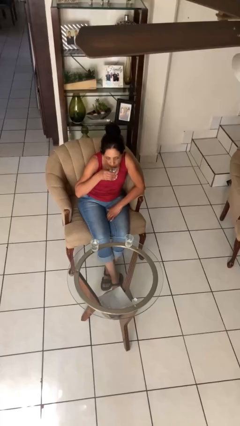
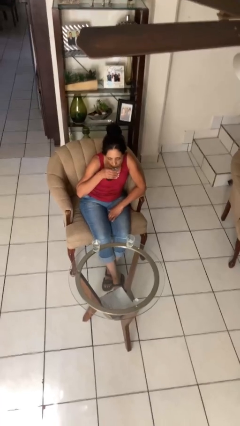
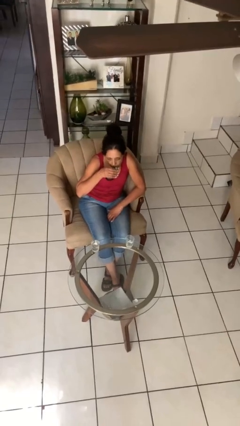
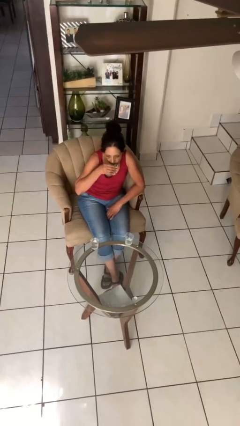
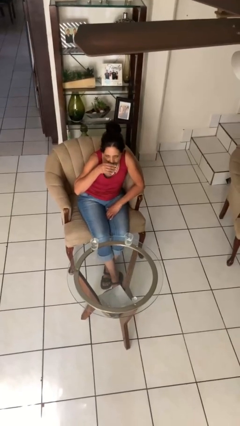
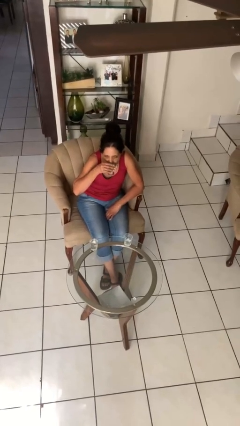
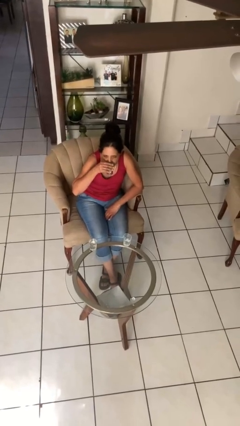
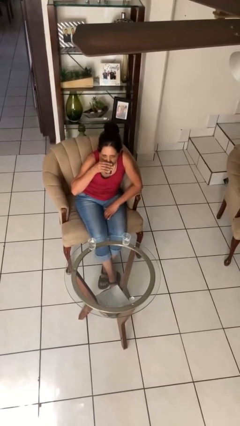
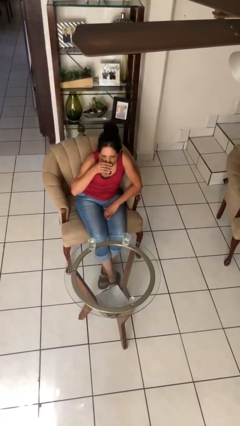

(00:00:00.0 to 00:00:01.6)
person drinks from shotglass

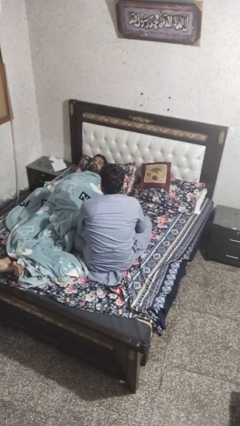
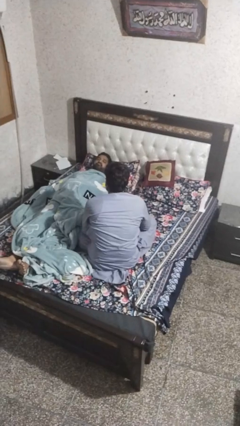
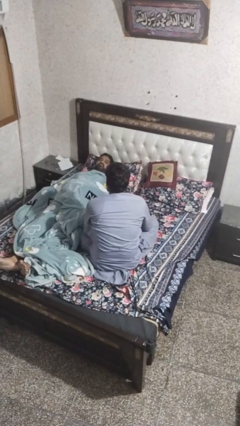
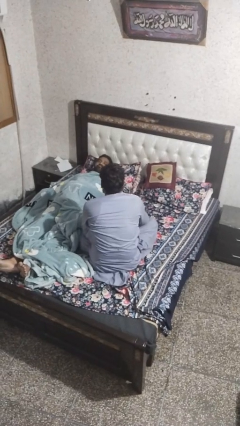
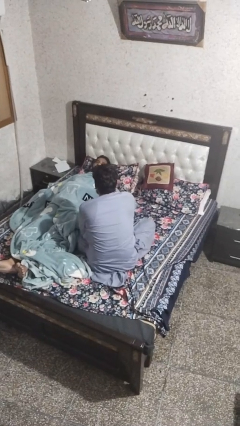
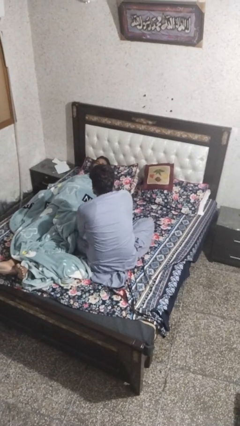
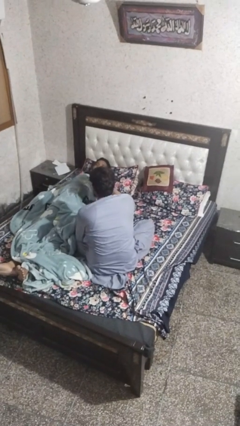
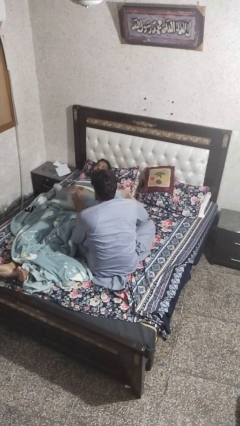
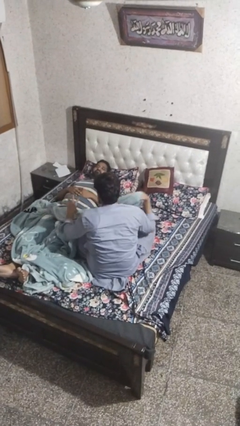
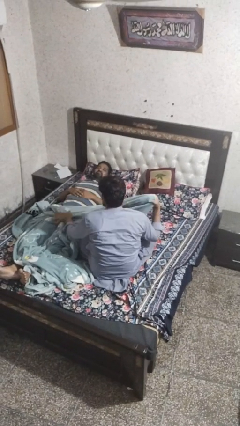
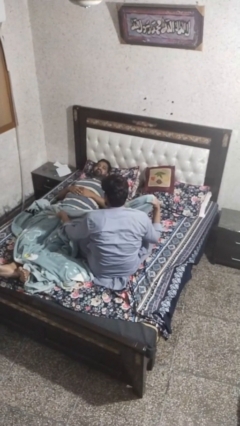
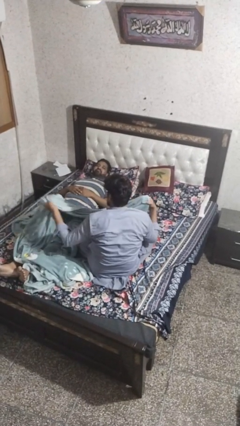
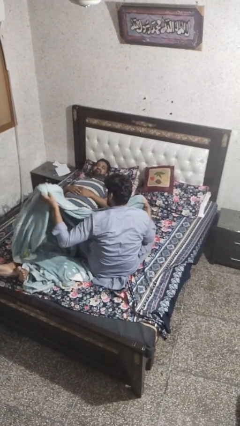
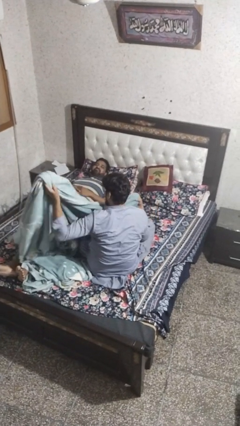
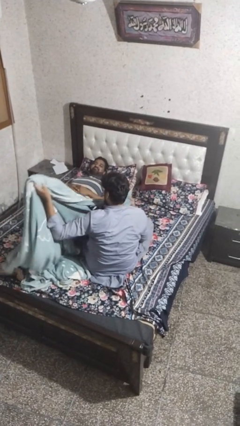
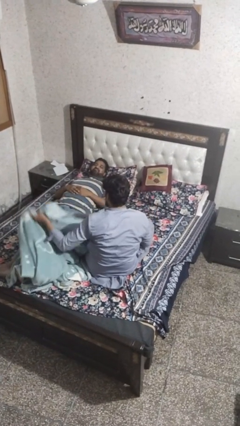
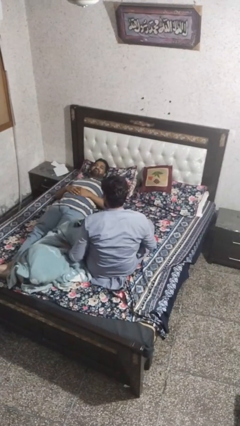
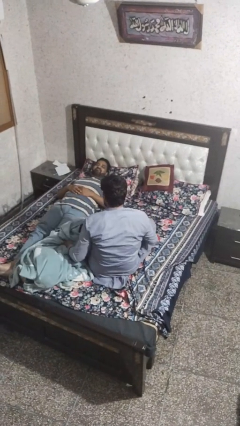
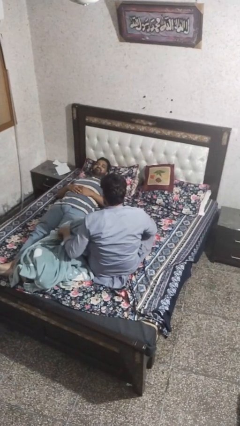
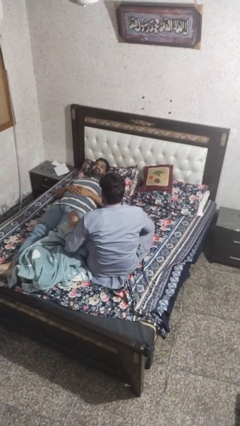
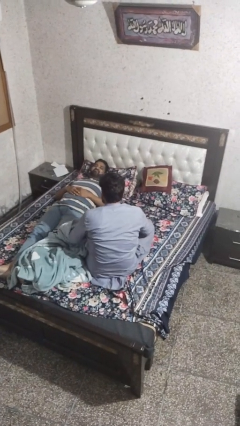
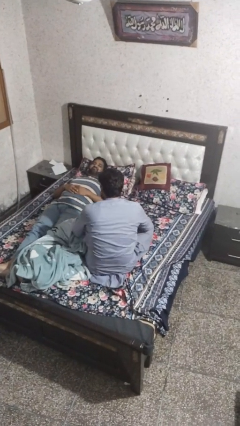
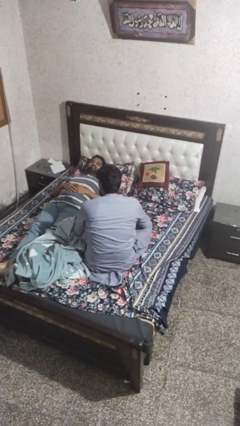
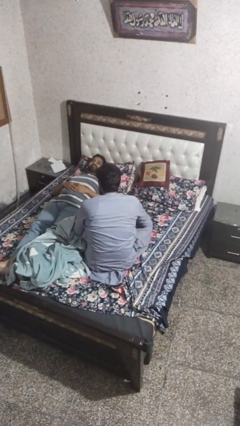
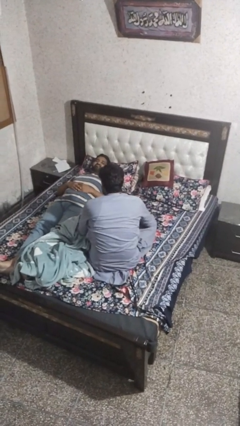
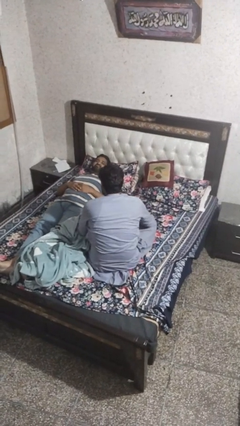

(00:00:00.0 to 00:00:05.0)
person uncovers friend with blanket

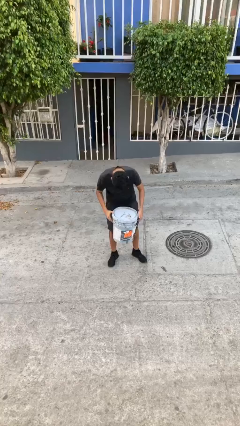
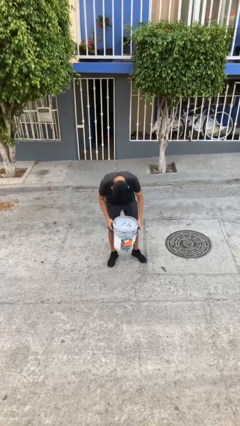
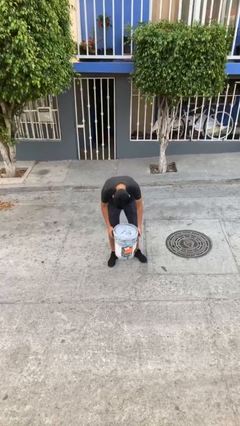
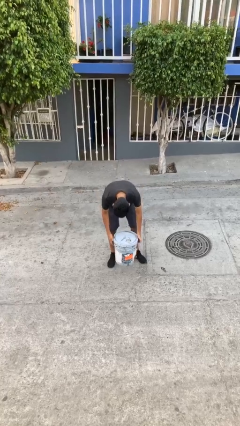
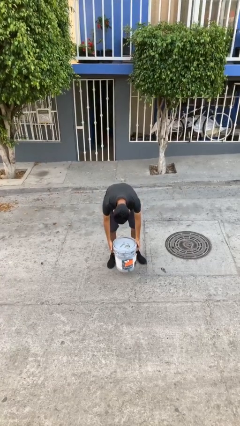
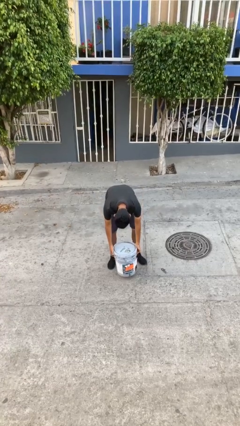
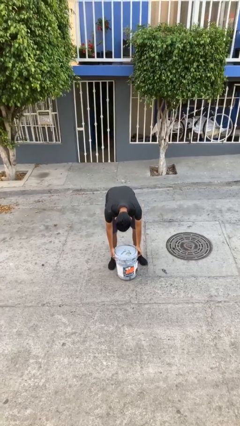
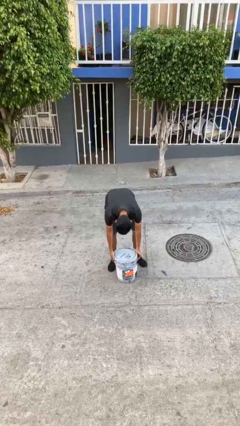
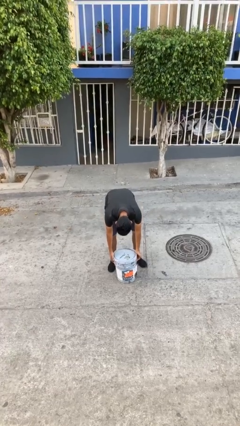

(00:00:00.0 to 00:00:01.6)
person puts down object on floor

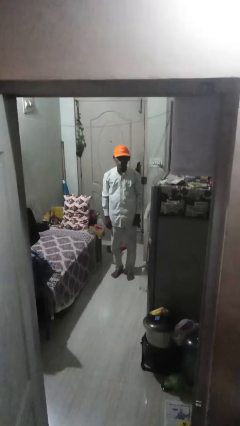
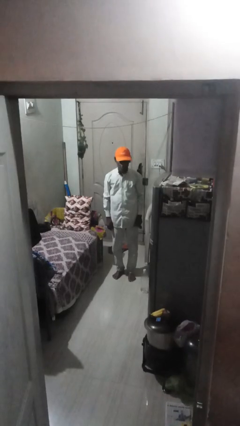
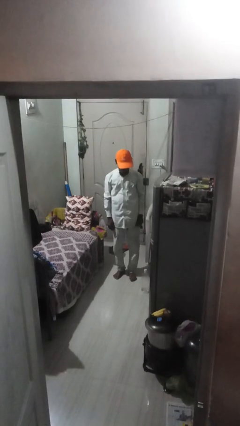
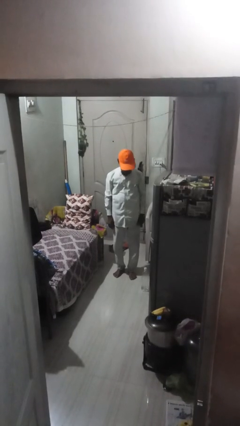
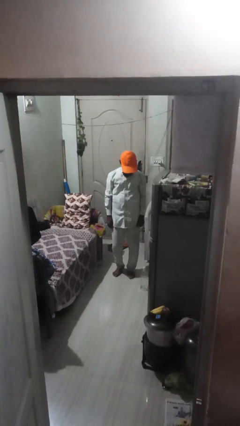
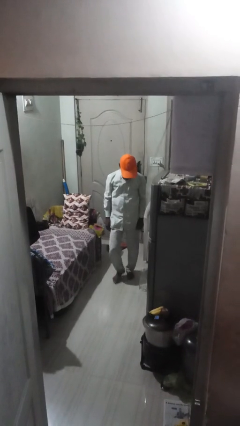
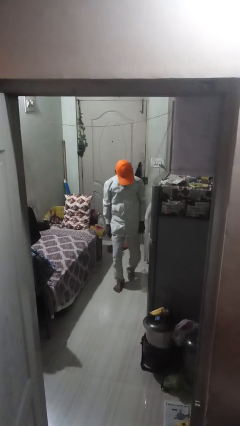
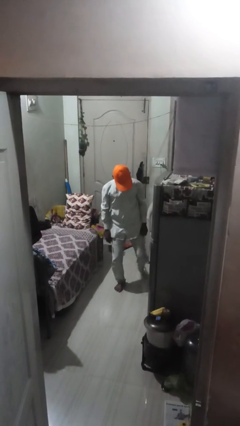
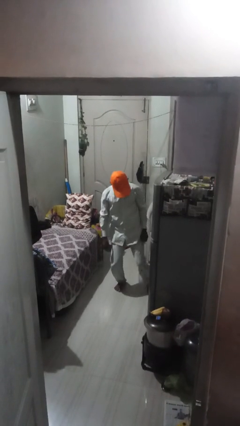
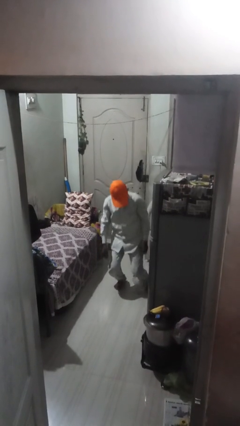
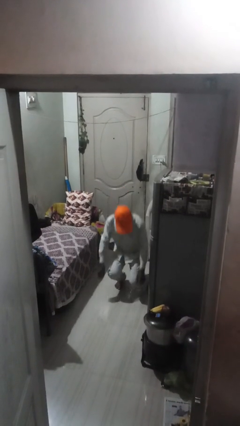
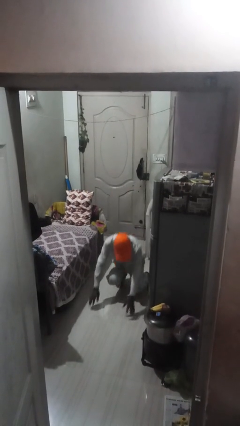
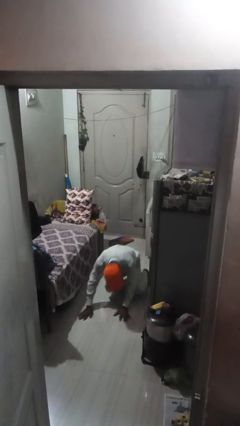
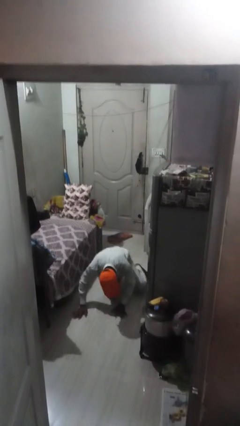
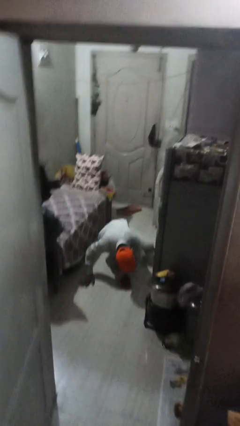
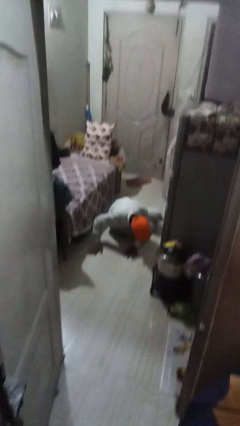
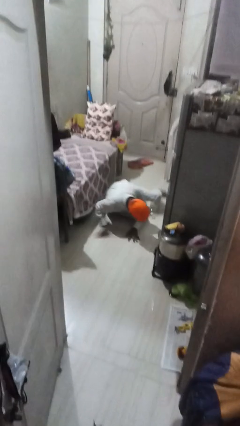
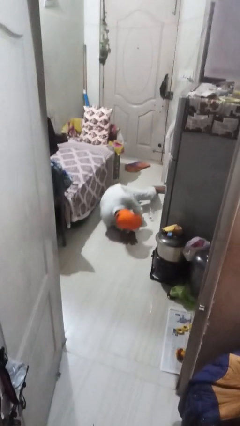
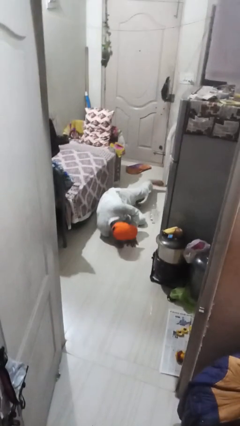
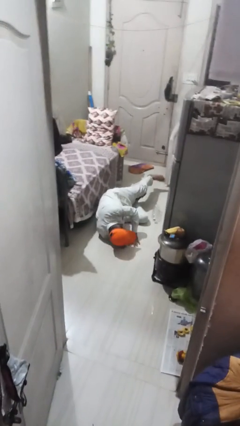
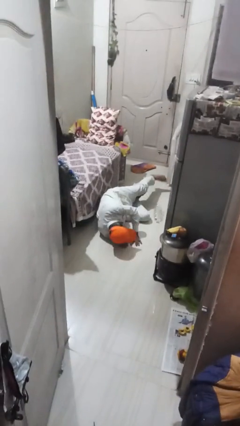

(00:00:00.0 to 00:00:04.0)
person trips on object on floor

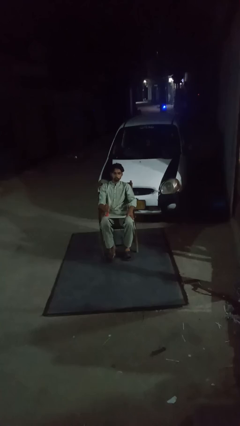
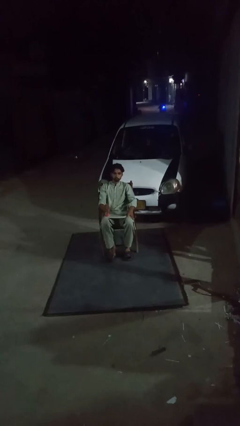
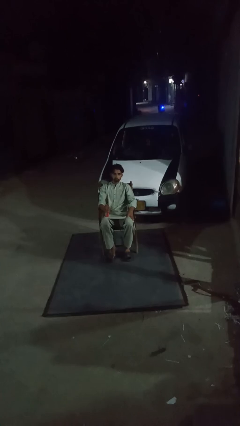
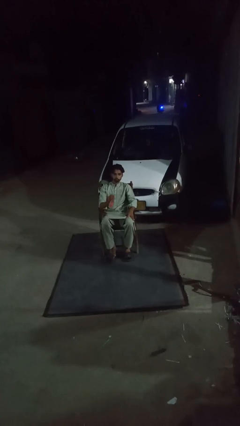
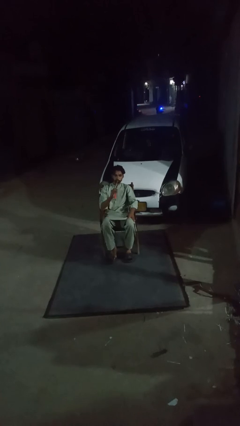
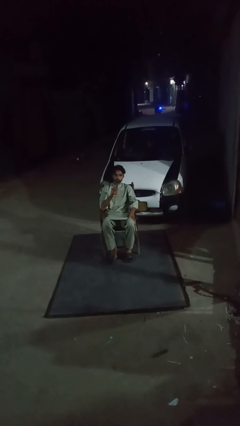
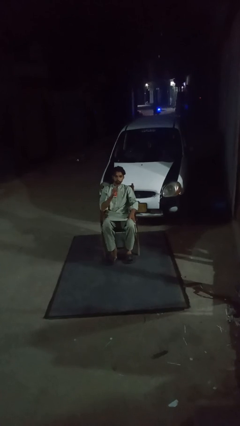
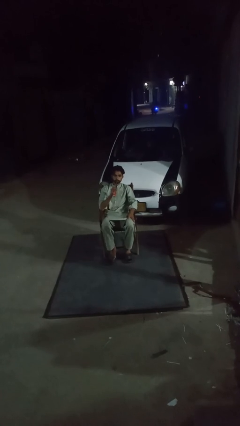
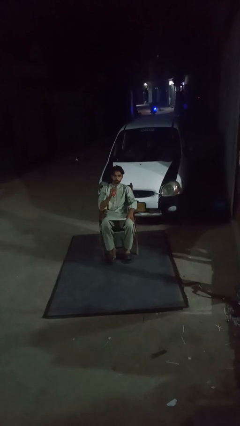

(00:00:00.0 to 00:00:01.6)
person drinks from straw

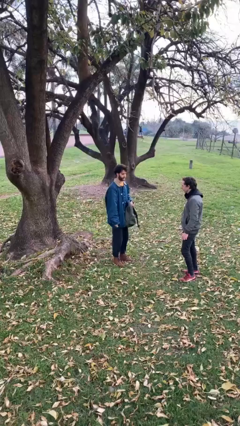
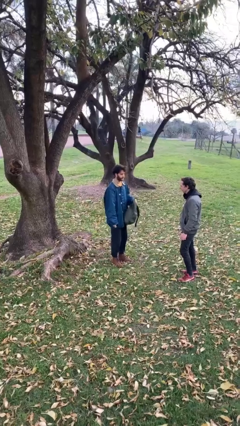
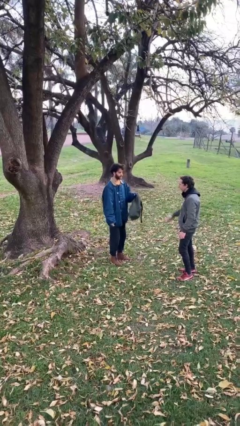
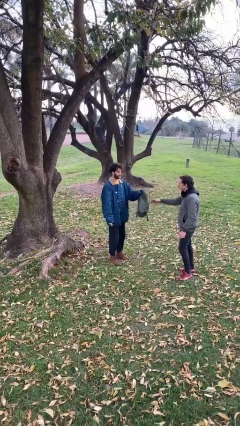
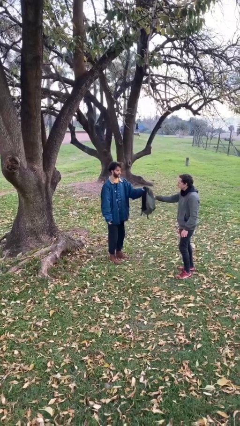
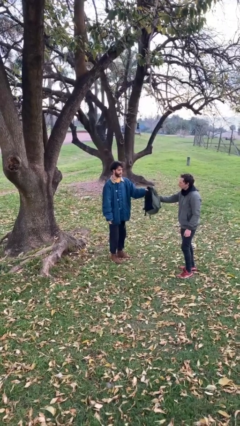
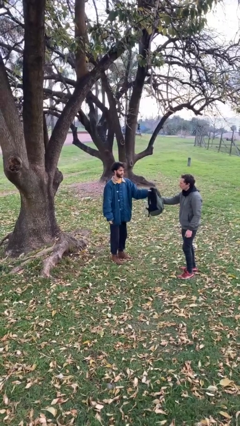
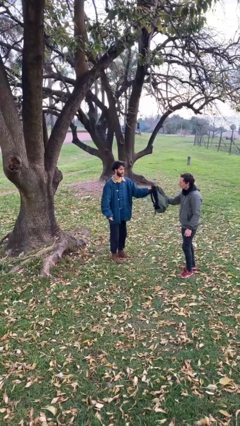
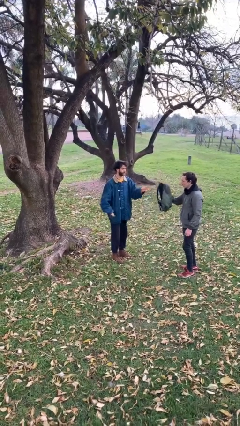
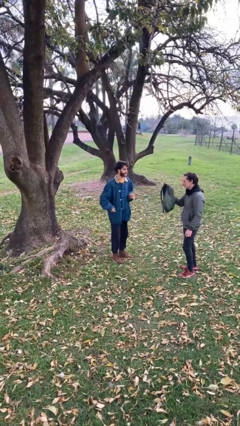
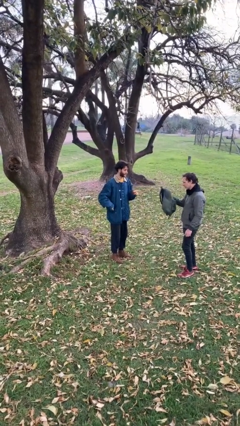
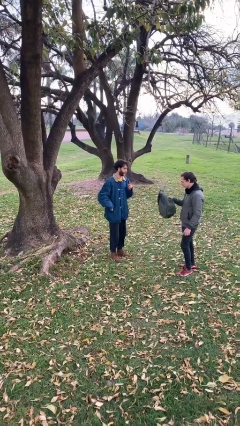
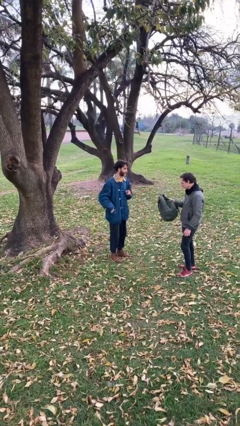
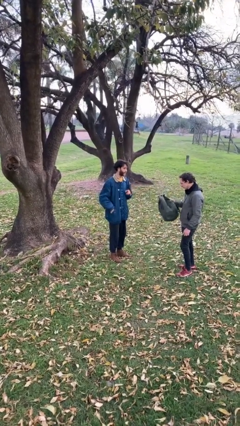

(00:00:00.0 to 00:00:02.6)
person transfers object to person

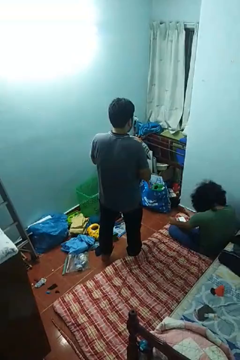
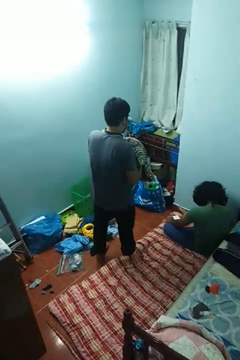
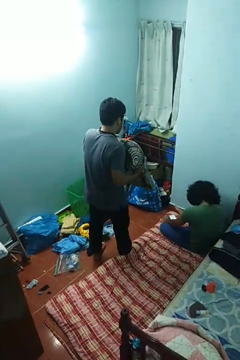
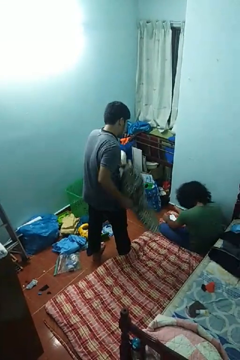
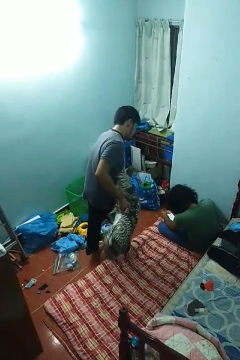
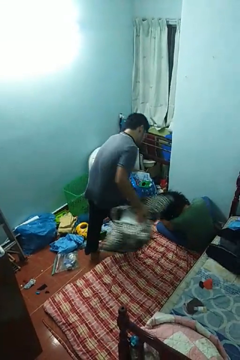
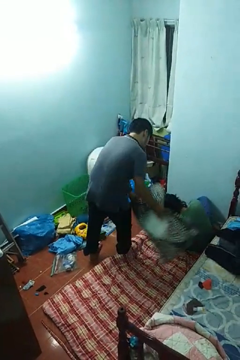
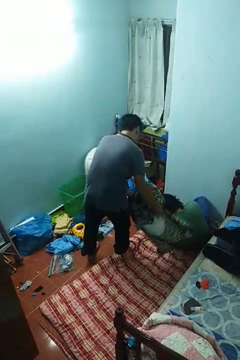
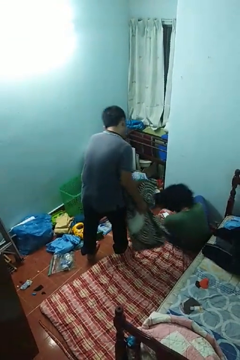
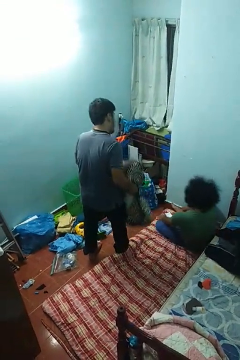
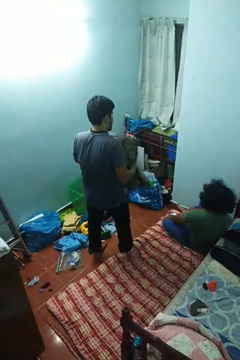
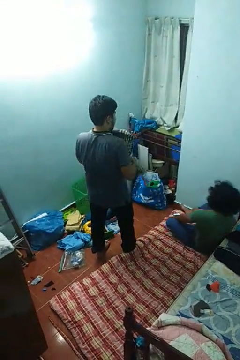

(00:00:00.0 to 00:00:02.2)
person hits person with pillow
